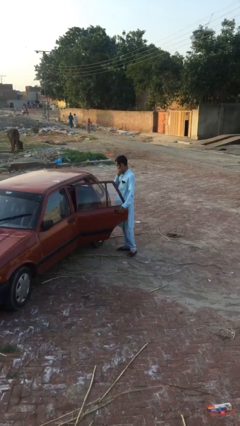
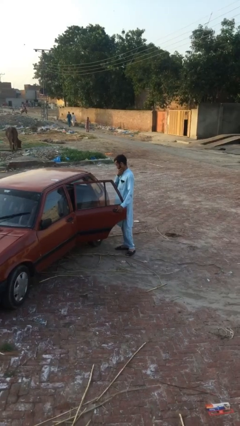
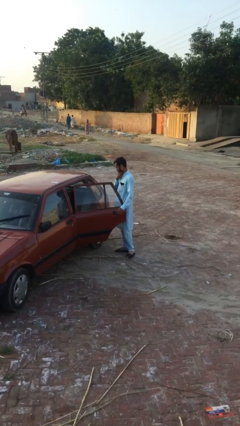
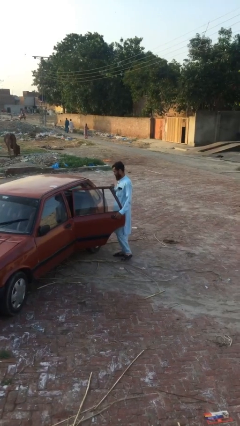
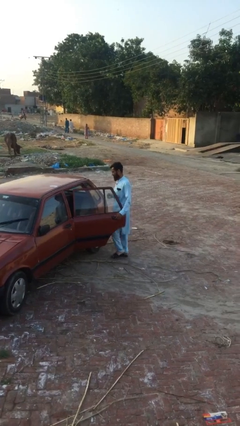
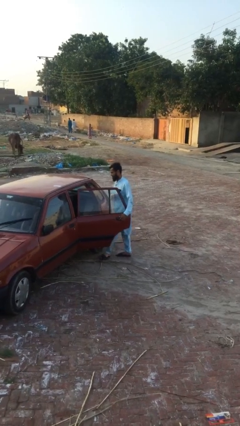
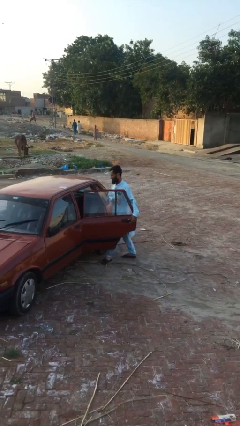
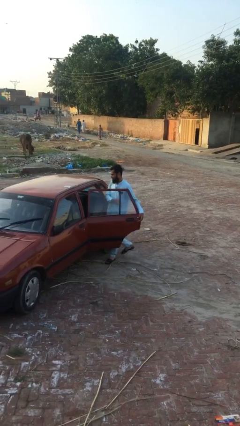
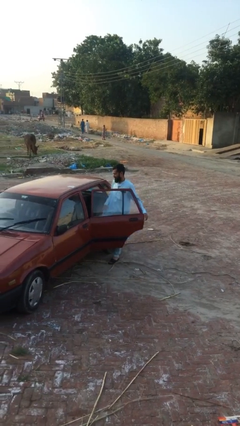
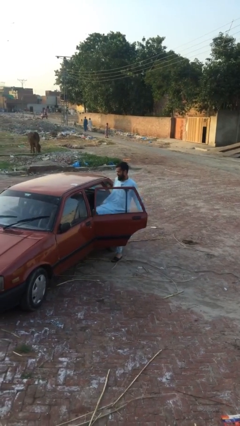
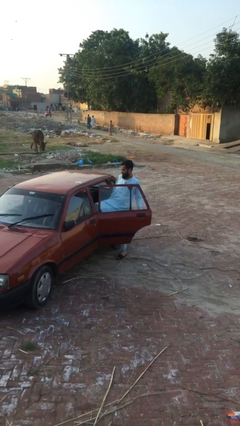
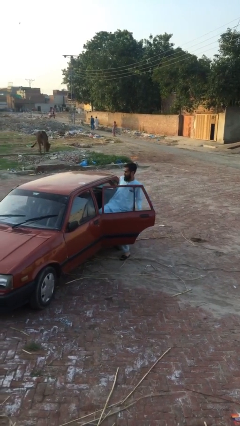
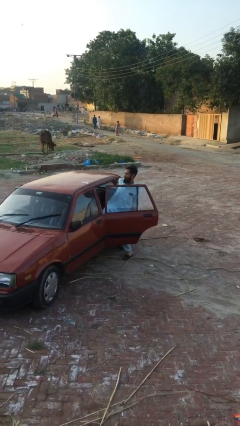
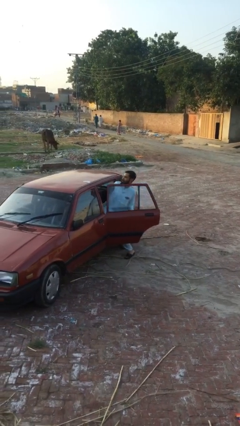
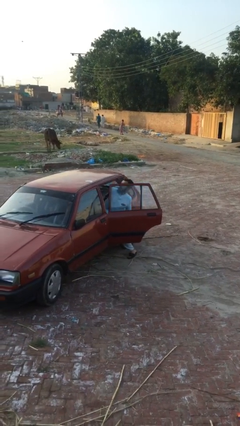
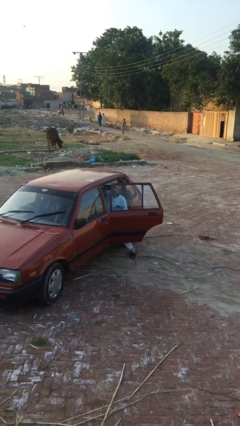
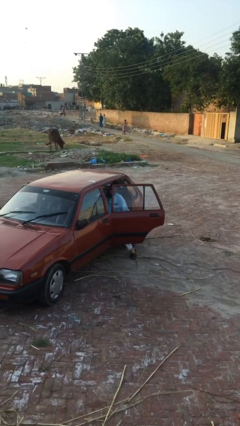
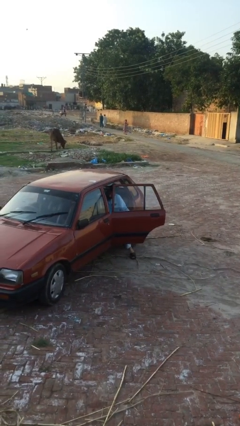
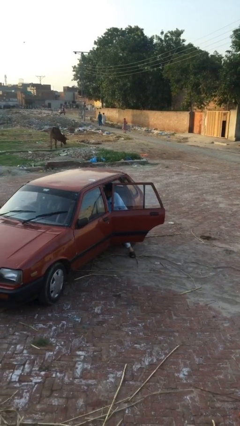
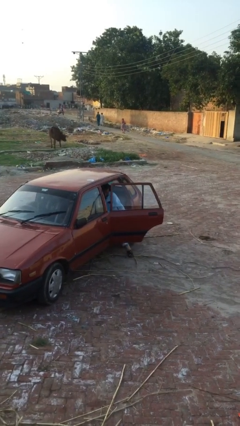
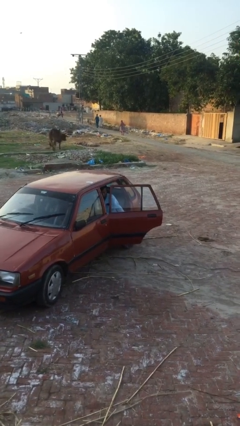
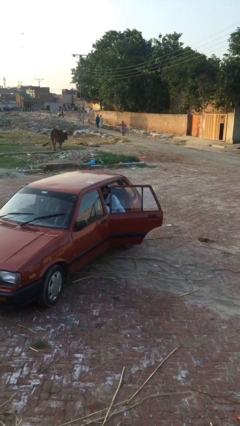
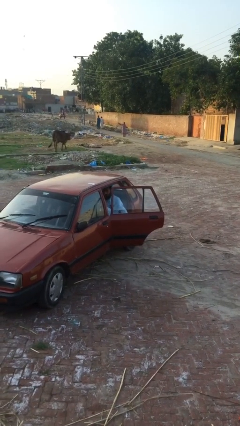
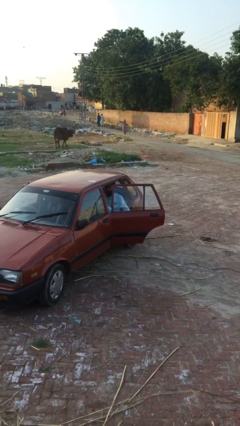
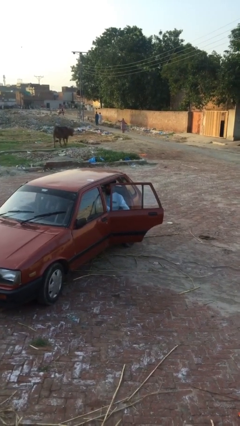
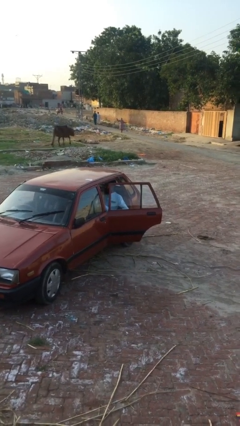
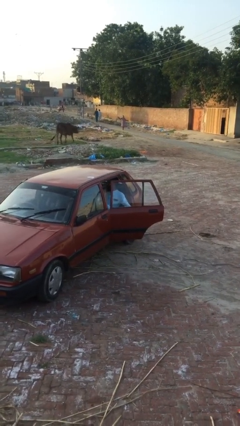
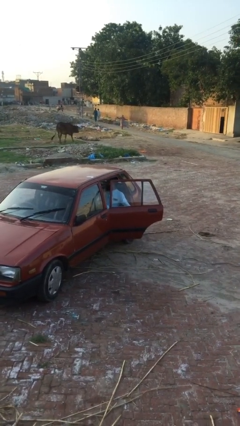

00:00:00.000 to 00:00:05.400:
person enters car

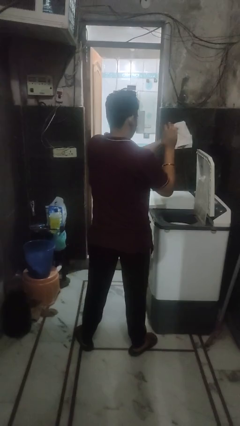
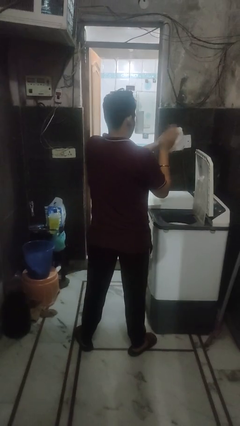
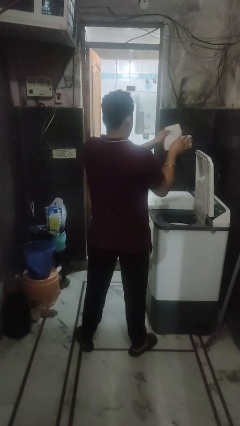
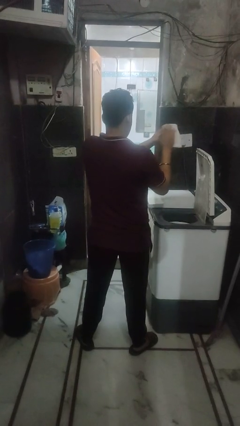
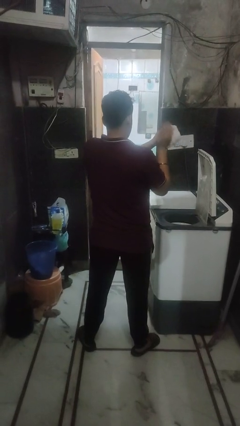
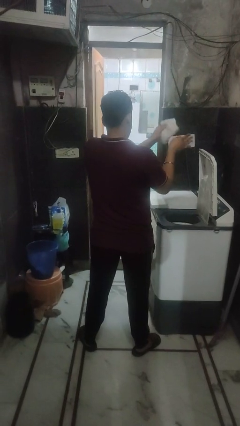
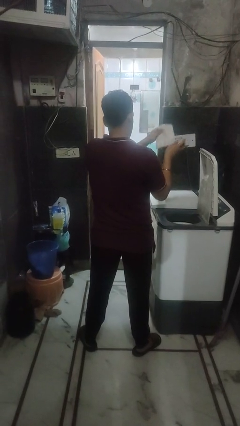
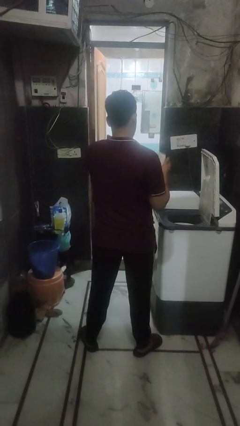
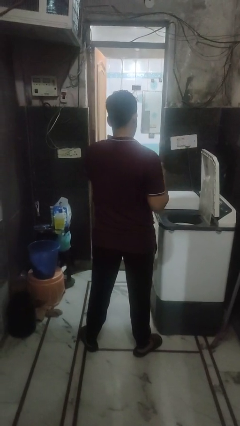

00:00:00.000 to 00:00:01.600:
person cleans dryer lint trap

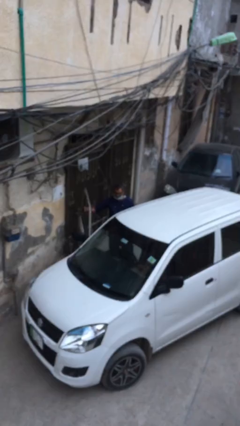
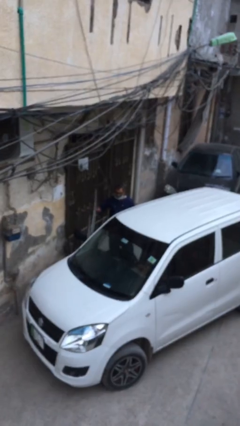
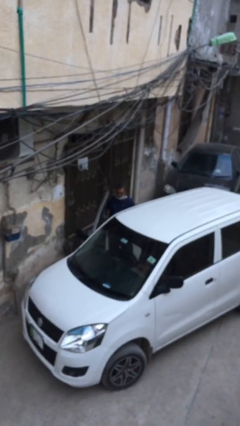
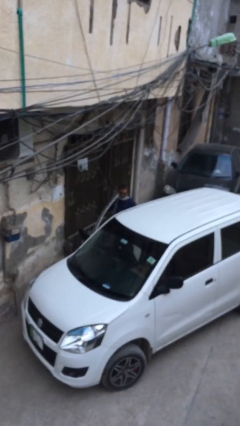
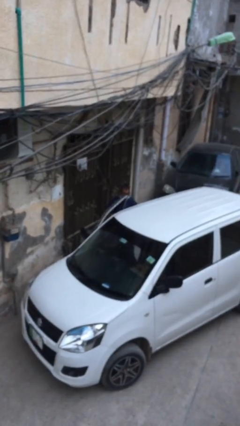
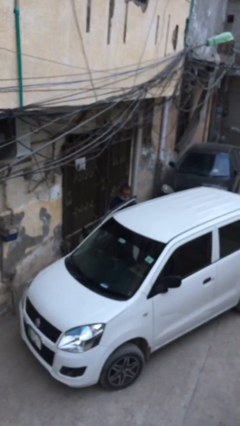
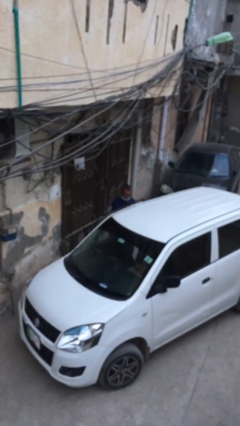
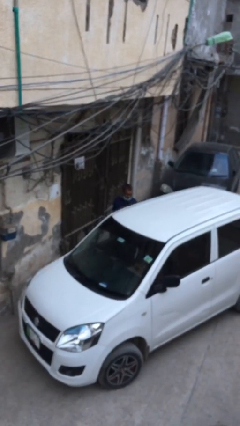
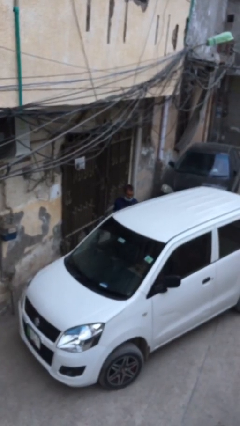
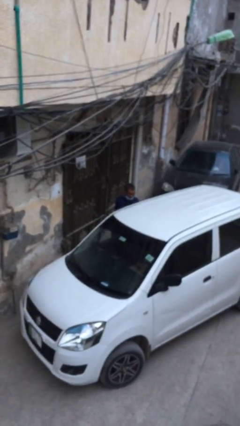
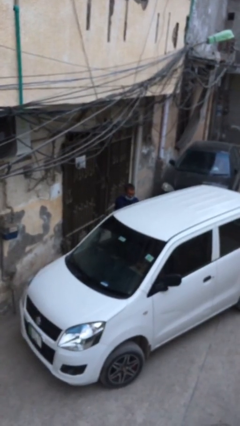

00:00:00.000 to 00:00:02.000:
person closes car door

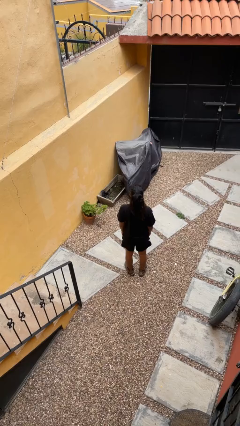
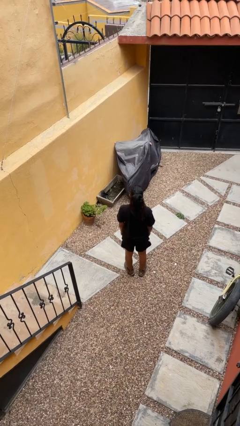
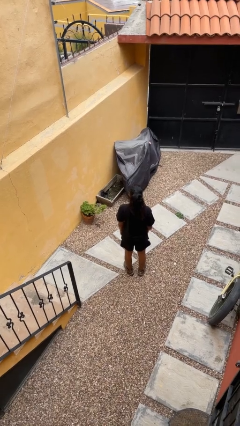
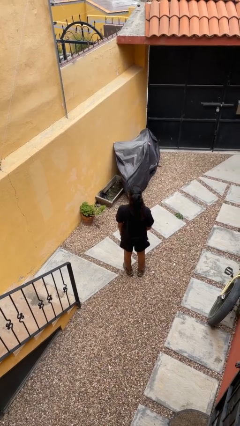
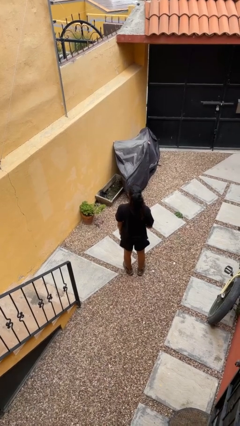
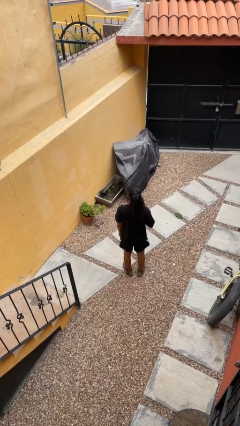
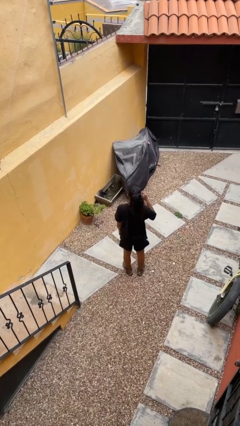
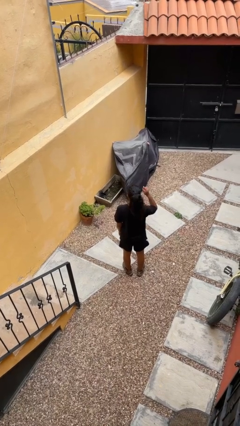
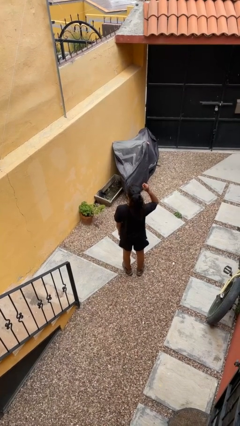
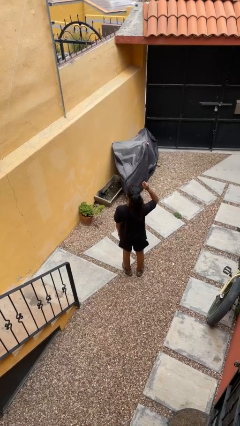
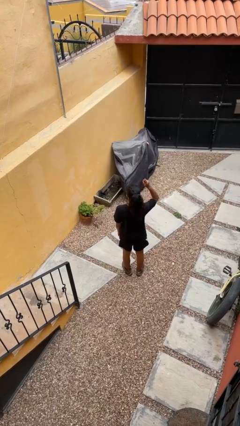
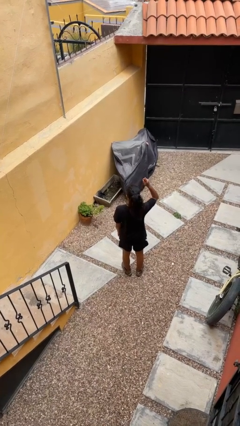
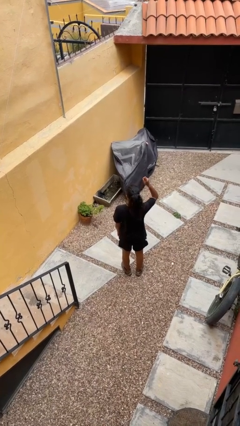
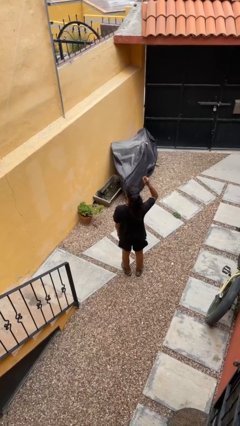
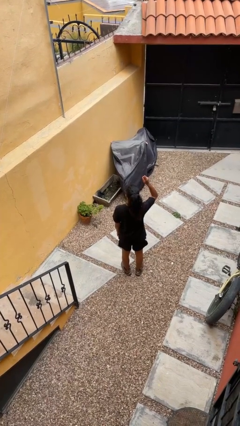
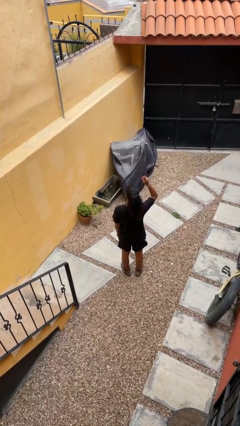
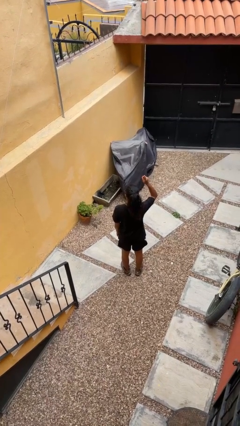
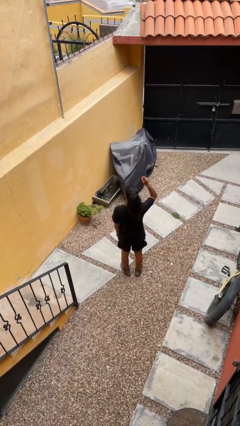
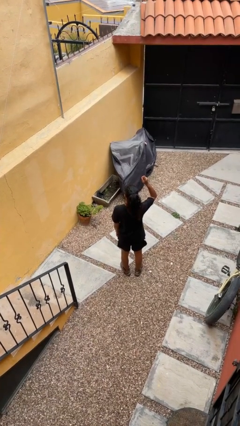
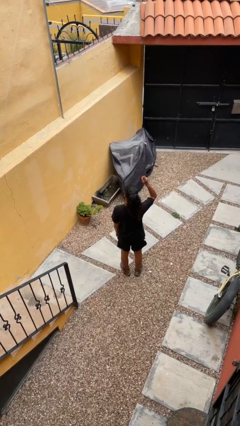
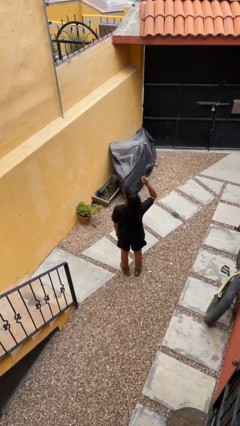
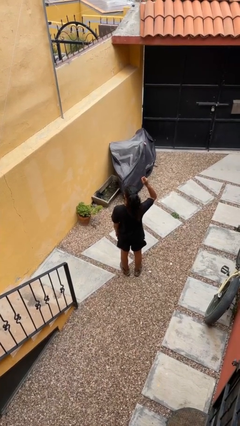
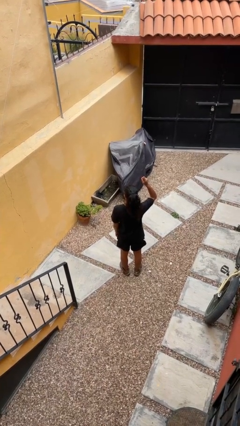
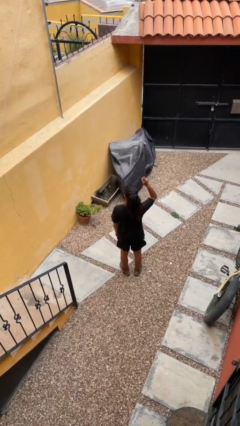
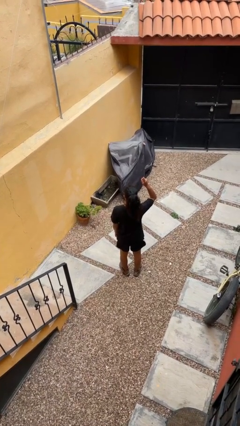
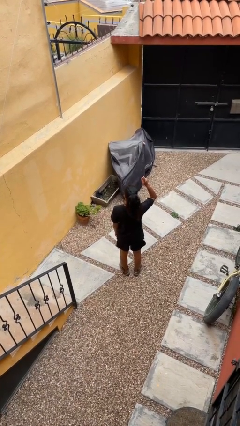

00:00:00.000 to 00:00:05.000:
person gestures raise hand

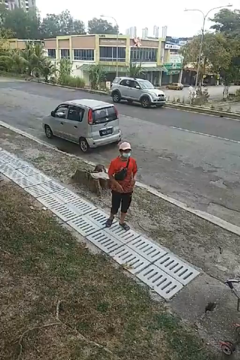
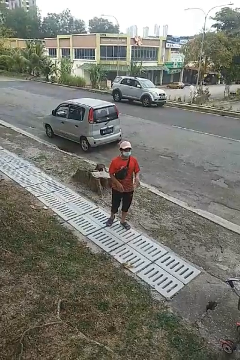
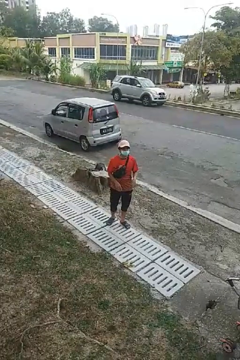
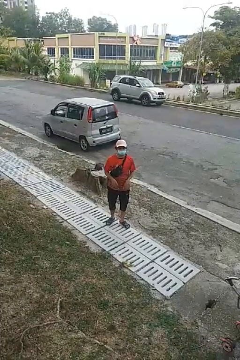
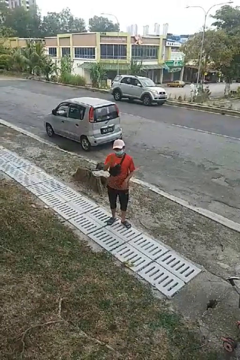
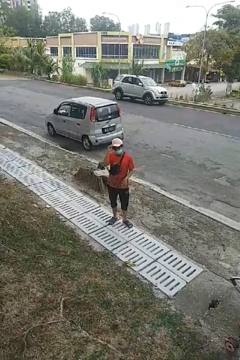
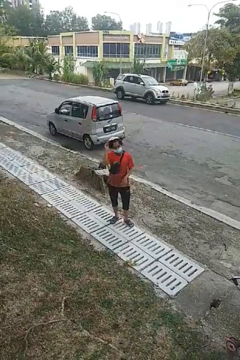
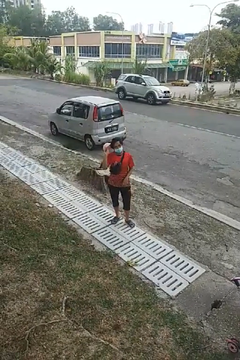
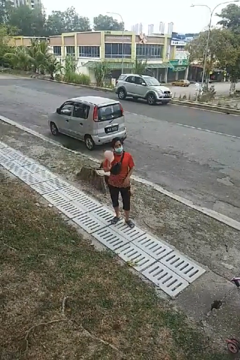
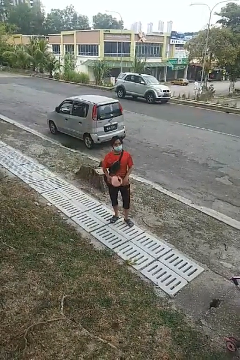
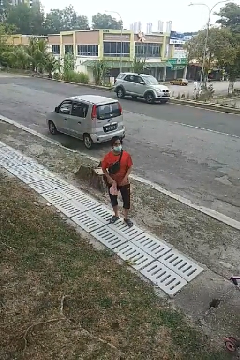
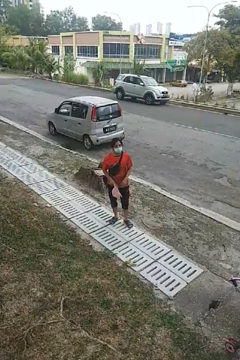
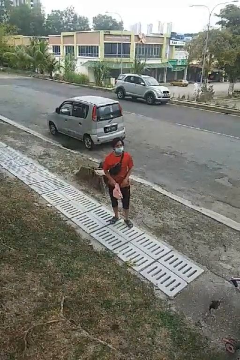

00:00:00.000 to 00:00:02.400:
person takes off hat

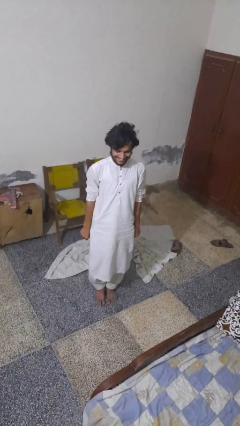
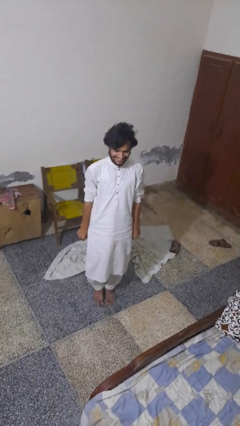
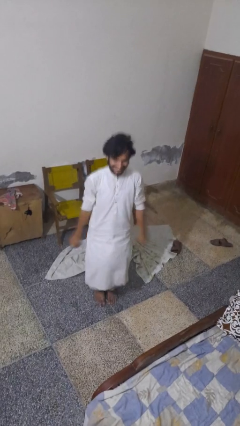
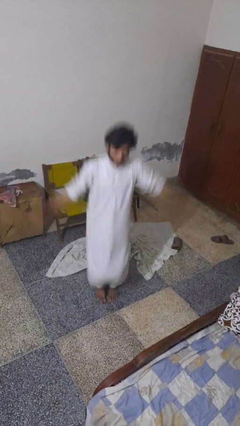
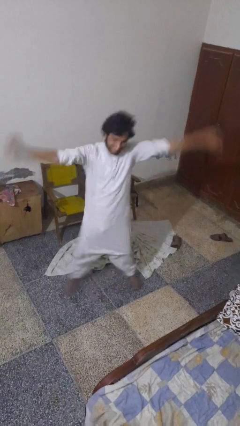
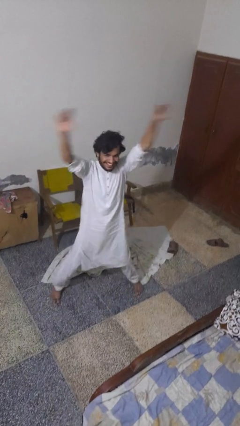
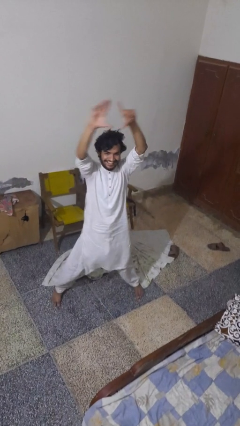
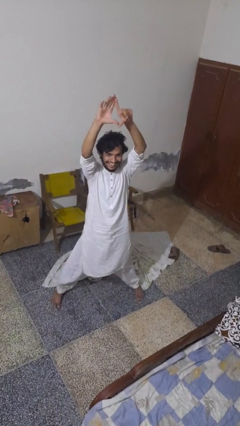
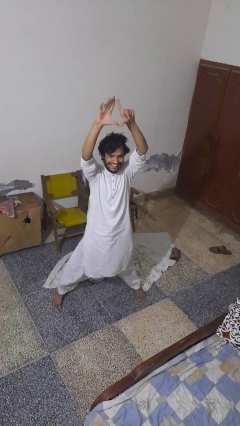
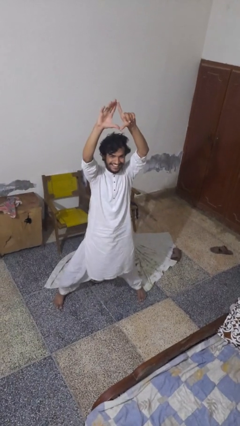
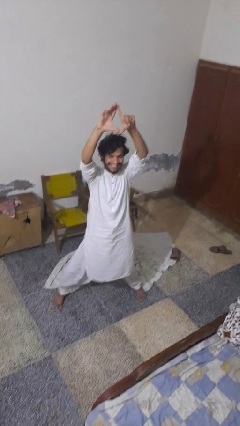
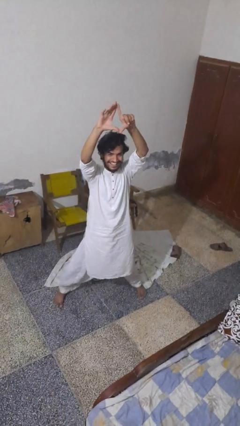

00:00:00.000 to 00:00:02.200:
person exercises with jumping jacks
